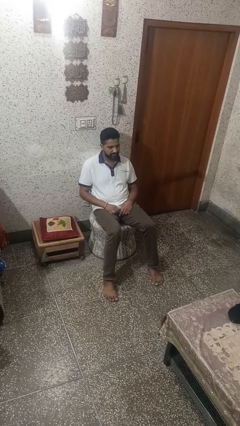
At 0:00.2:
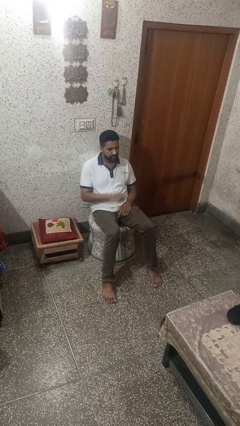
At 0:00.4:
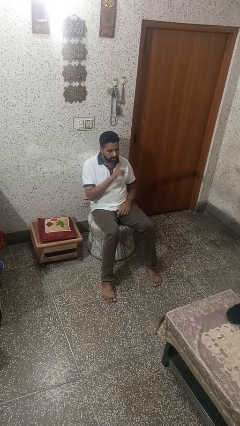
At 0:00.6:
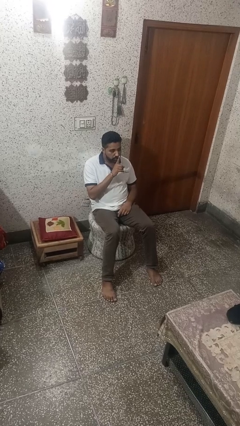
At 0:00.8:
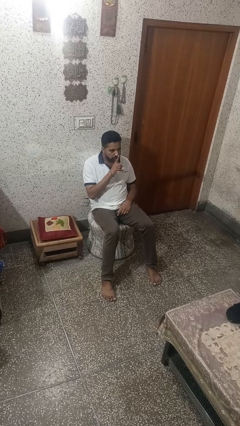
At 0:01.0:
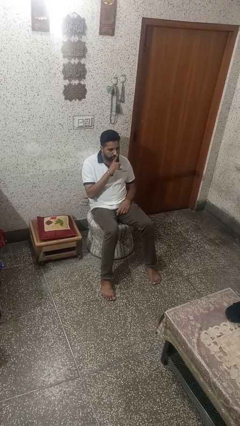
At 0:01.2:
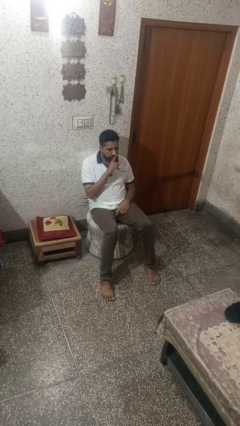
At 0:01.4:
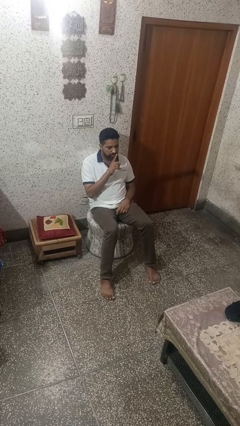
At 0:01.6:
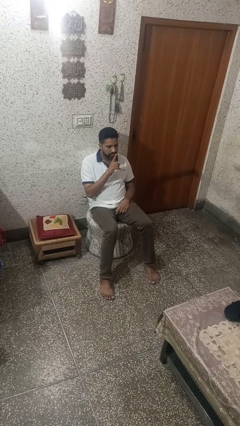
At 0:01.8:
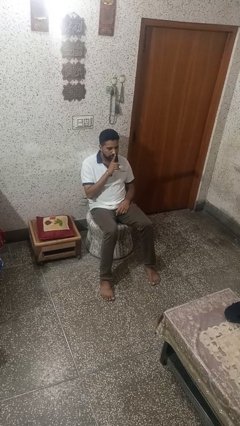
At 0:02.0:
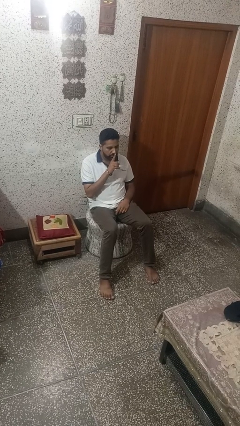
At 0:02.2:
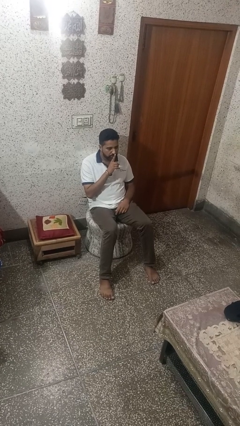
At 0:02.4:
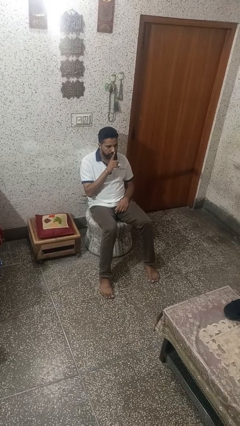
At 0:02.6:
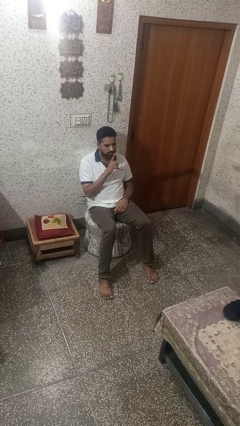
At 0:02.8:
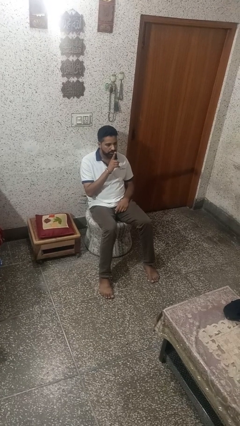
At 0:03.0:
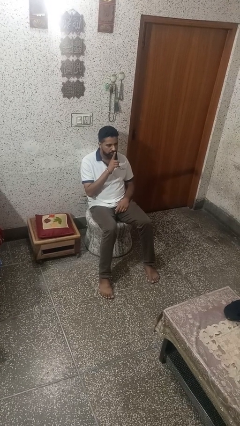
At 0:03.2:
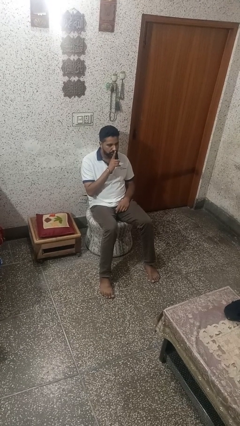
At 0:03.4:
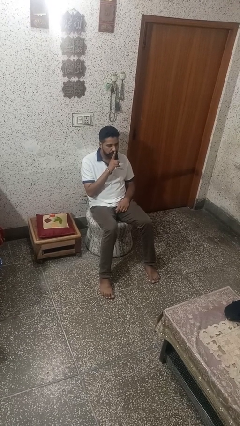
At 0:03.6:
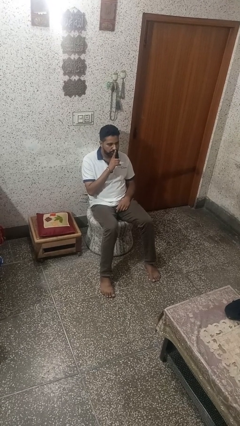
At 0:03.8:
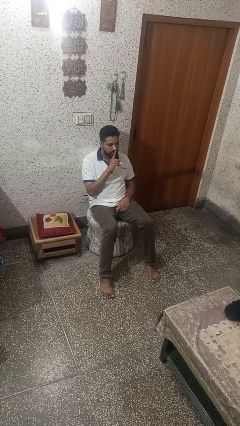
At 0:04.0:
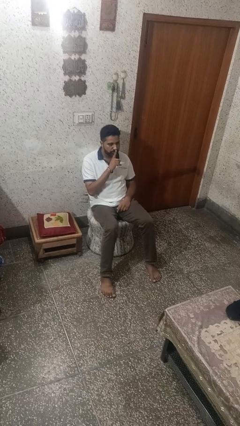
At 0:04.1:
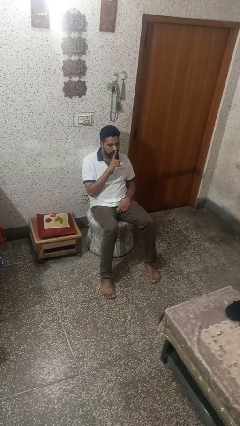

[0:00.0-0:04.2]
person gestures be quiet

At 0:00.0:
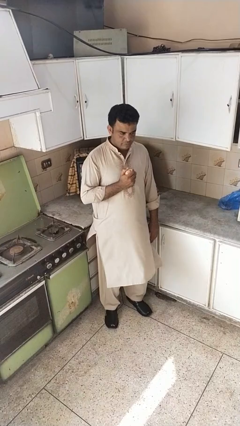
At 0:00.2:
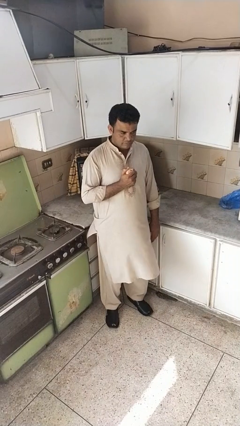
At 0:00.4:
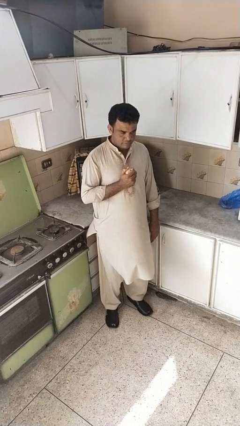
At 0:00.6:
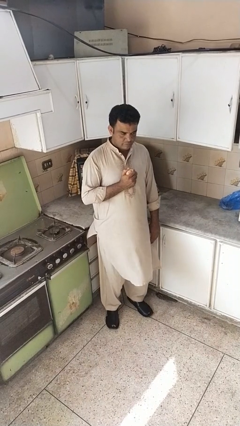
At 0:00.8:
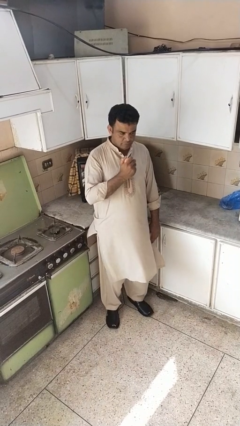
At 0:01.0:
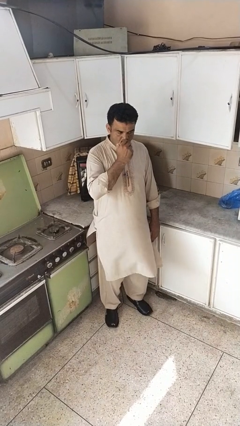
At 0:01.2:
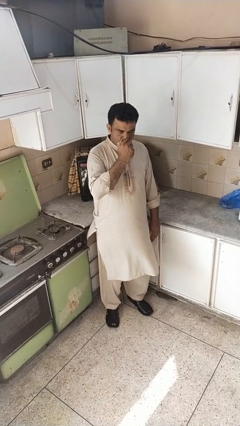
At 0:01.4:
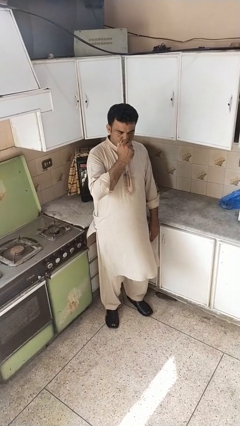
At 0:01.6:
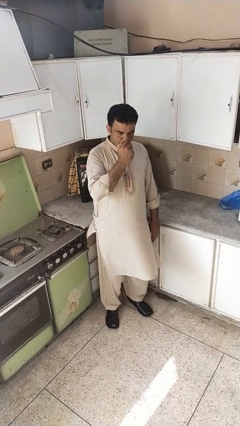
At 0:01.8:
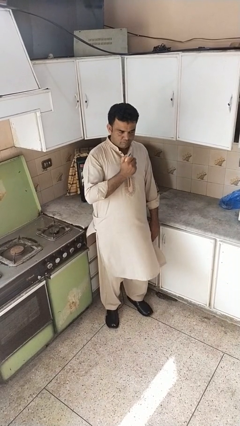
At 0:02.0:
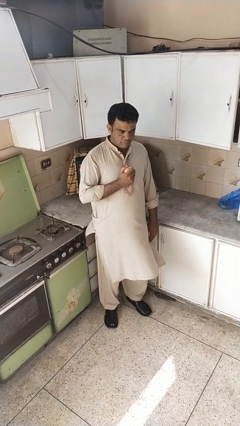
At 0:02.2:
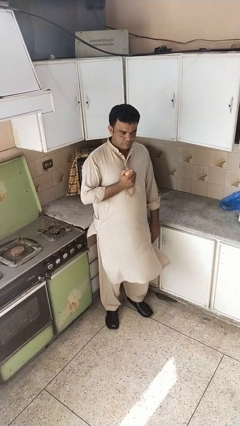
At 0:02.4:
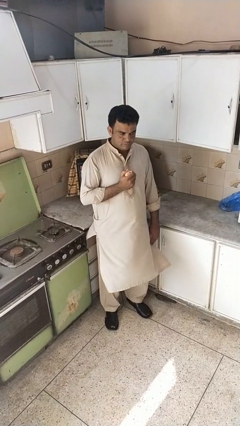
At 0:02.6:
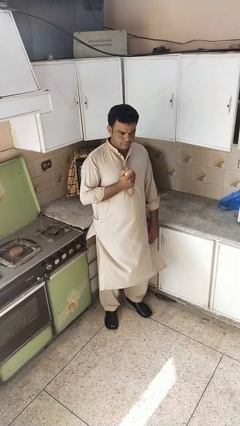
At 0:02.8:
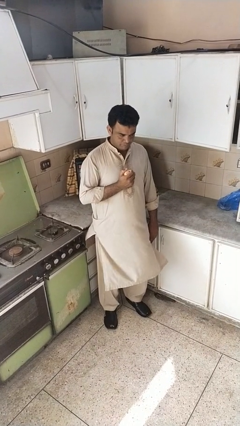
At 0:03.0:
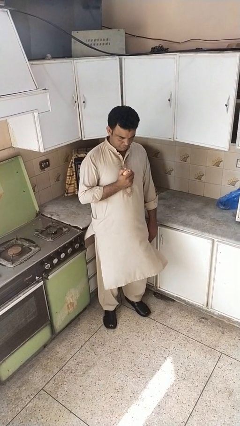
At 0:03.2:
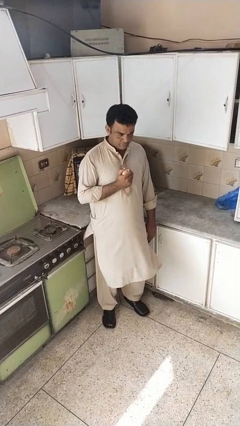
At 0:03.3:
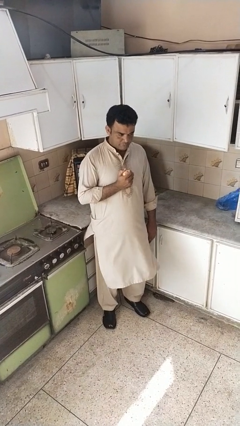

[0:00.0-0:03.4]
person eats apple

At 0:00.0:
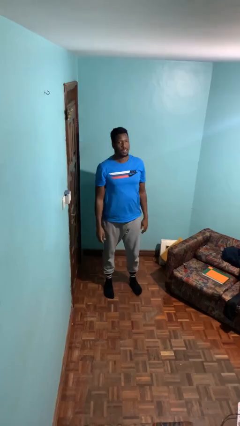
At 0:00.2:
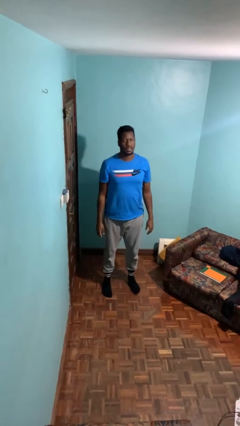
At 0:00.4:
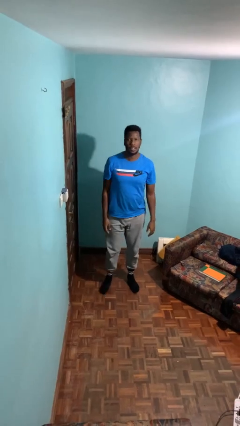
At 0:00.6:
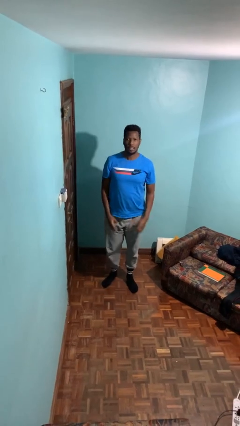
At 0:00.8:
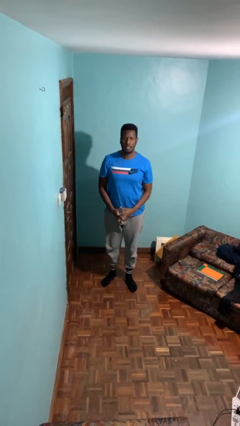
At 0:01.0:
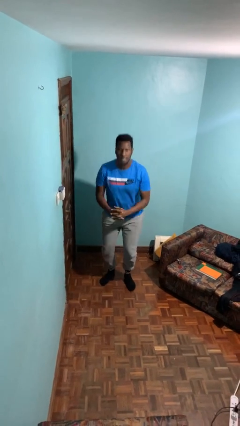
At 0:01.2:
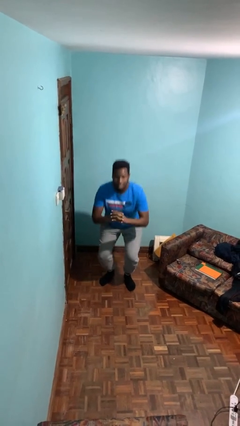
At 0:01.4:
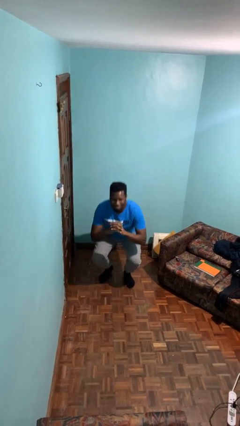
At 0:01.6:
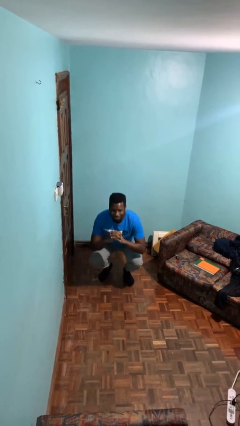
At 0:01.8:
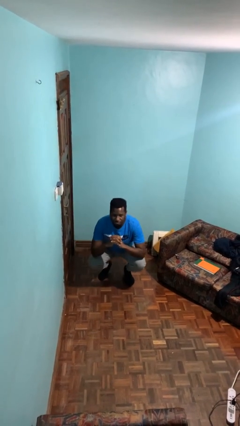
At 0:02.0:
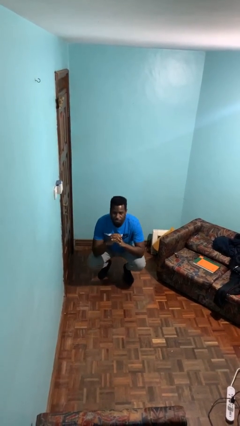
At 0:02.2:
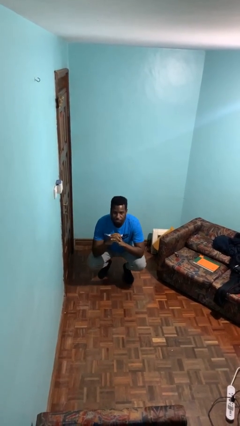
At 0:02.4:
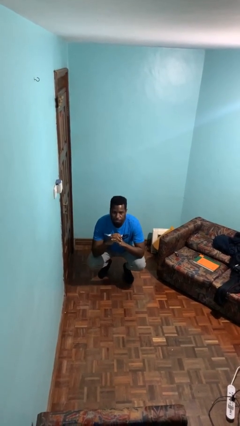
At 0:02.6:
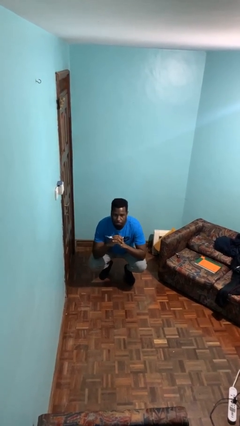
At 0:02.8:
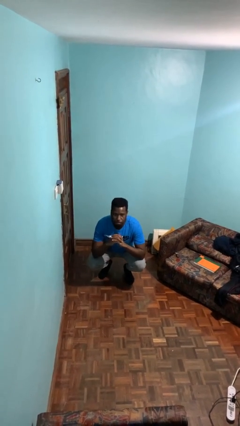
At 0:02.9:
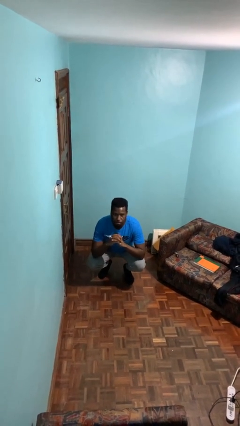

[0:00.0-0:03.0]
person squats

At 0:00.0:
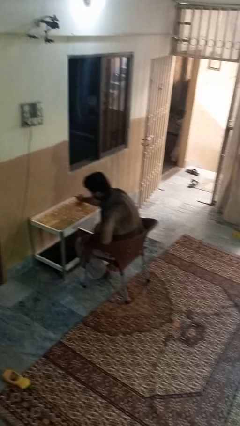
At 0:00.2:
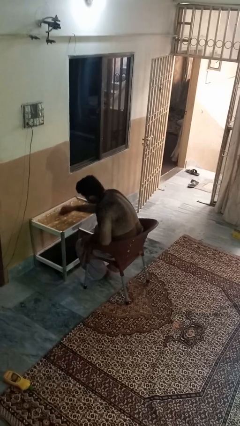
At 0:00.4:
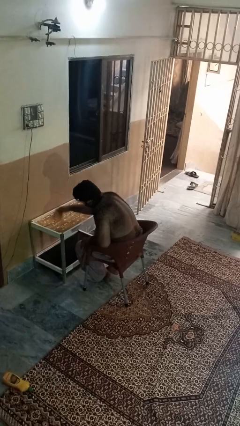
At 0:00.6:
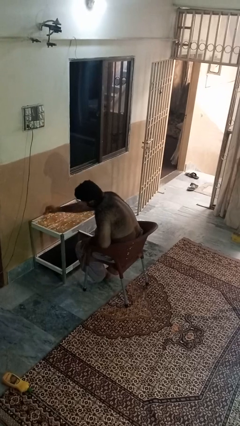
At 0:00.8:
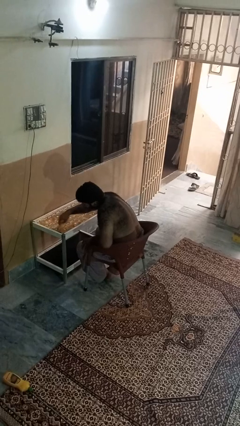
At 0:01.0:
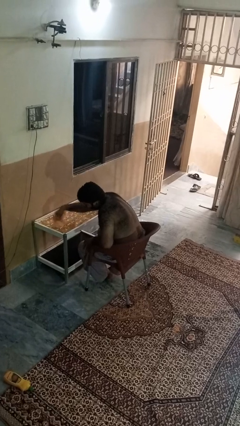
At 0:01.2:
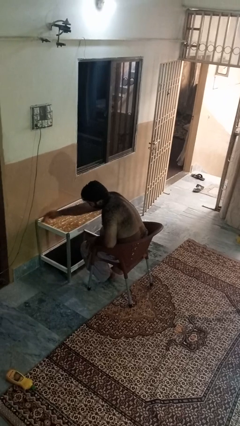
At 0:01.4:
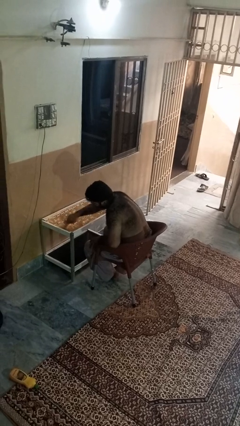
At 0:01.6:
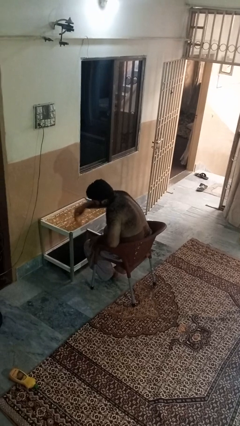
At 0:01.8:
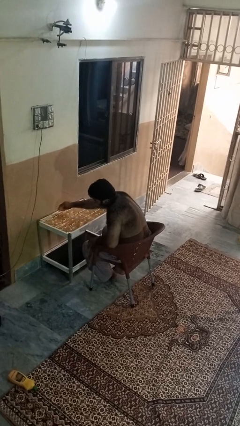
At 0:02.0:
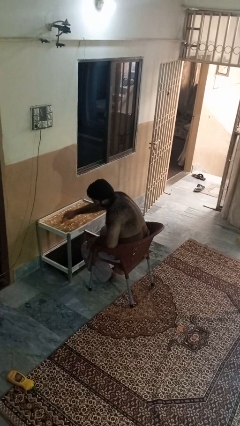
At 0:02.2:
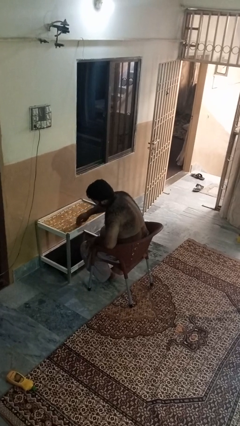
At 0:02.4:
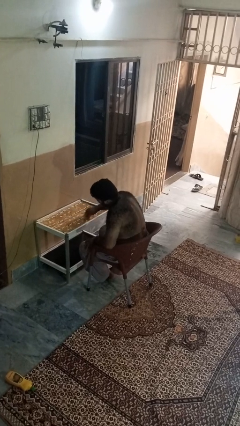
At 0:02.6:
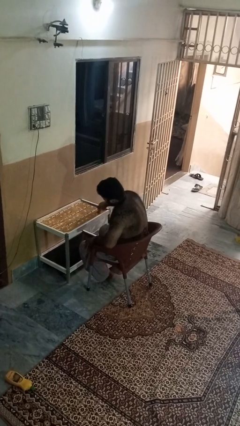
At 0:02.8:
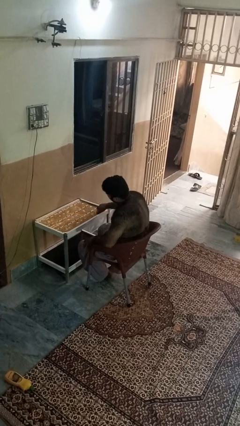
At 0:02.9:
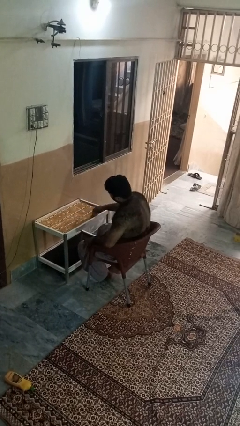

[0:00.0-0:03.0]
person cleans table with rag

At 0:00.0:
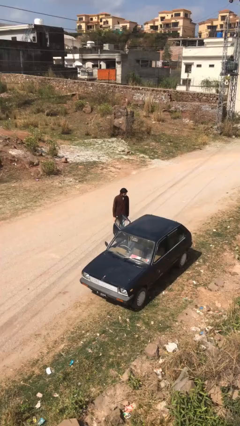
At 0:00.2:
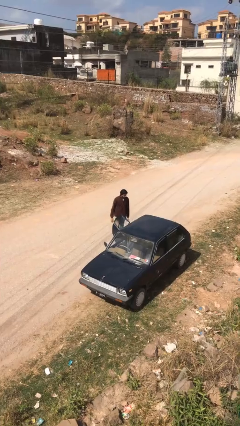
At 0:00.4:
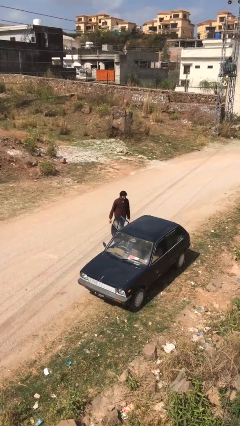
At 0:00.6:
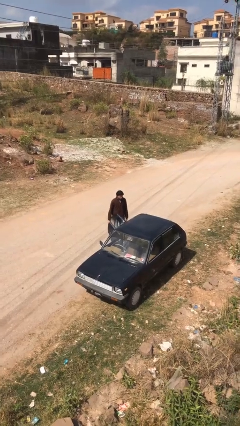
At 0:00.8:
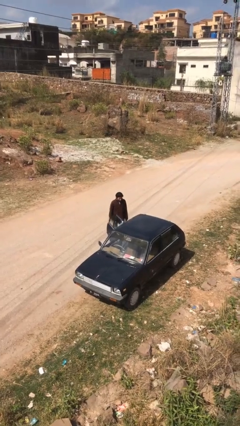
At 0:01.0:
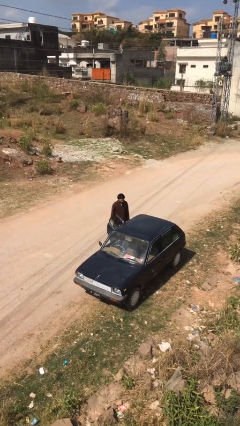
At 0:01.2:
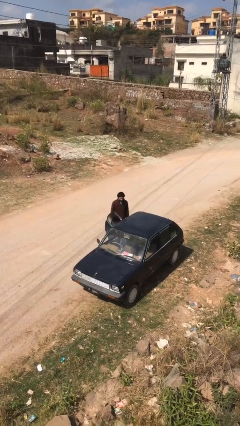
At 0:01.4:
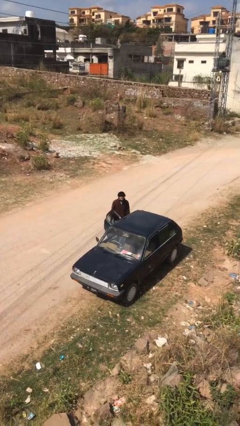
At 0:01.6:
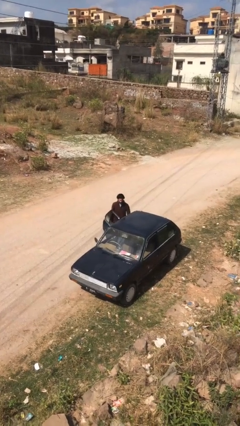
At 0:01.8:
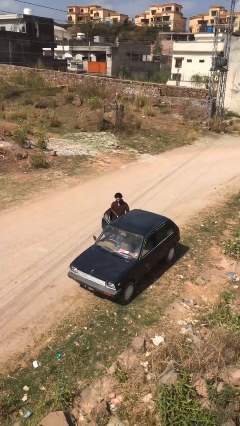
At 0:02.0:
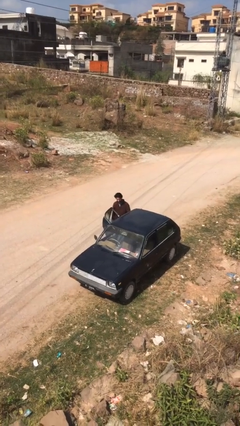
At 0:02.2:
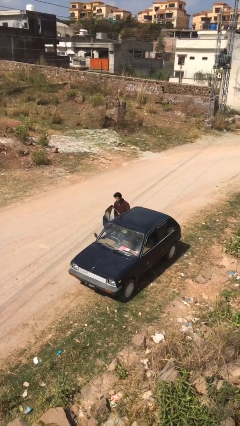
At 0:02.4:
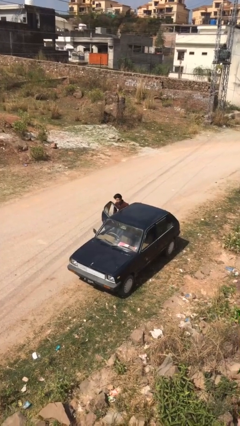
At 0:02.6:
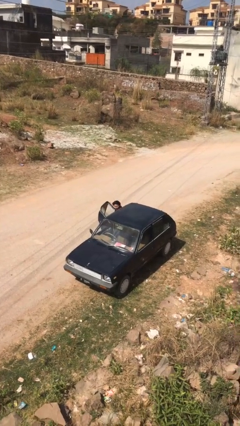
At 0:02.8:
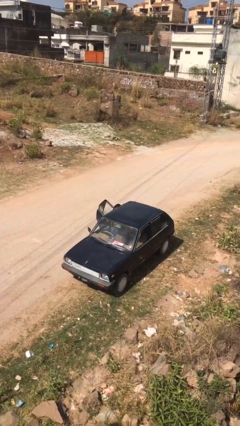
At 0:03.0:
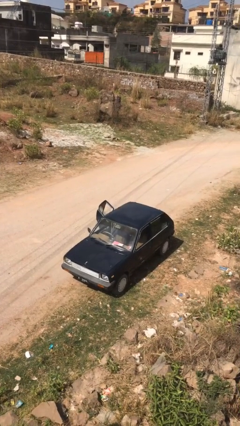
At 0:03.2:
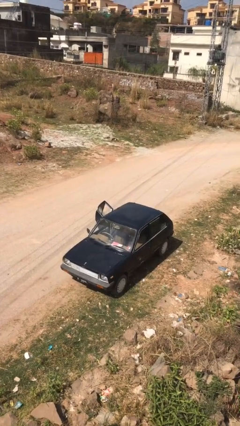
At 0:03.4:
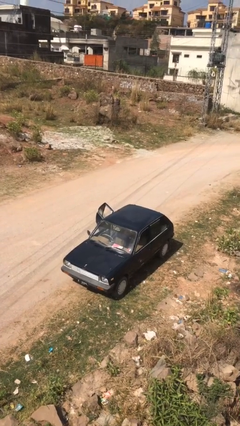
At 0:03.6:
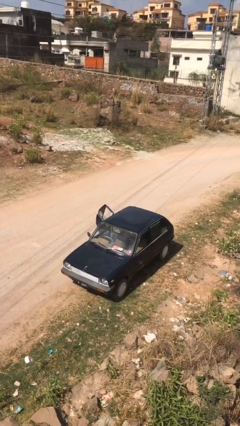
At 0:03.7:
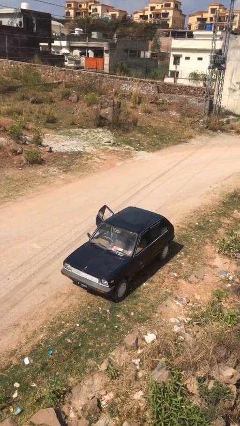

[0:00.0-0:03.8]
person enters car
